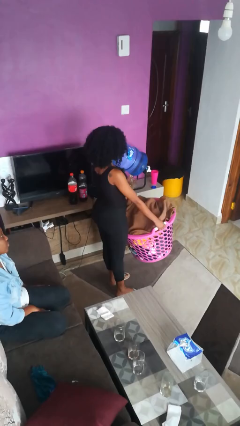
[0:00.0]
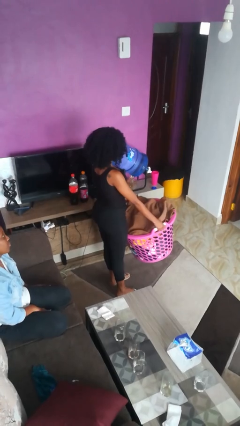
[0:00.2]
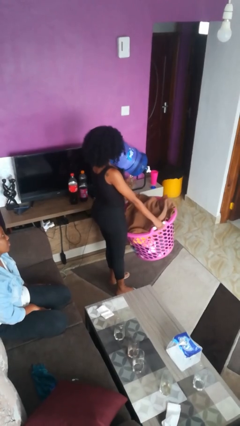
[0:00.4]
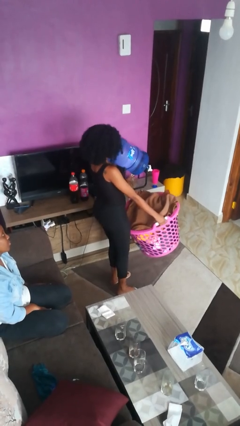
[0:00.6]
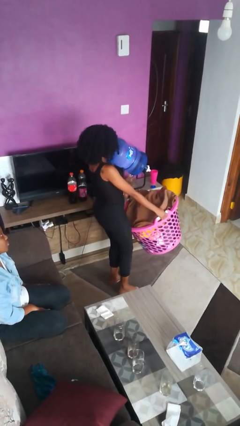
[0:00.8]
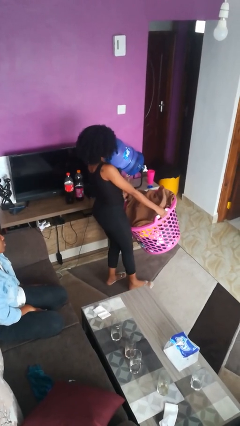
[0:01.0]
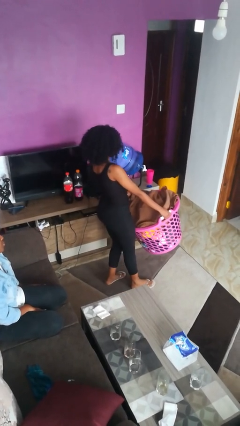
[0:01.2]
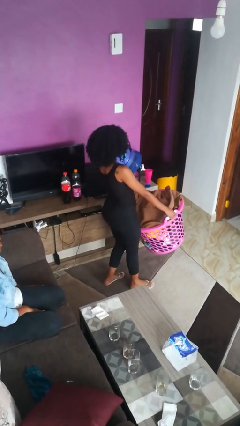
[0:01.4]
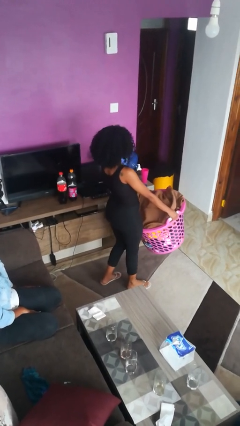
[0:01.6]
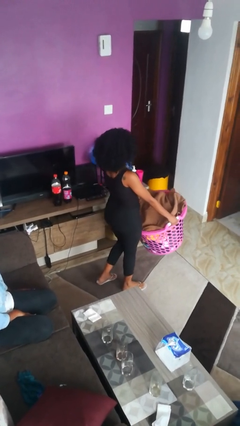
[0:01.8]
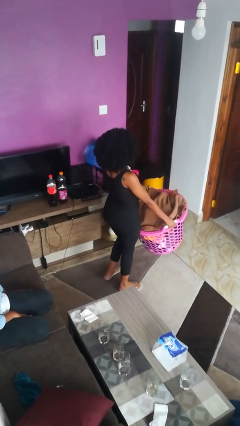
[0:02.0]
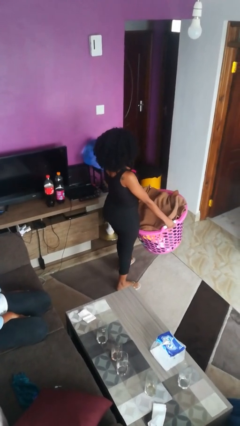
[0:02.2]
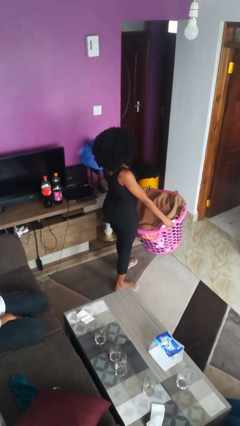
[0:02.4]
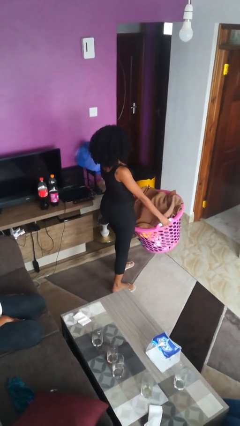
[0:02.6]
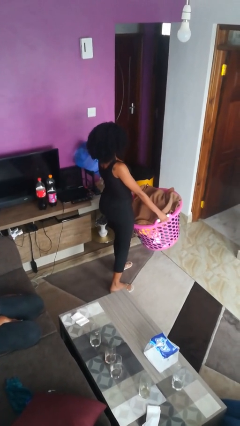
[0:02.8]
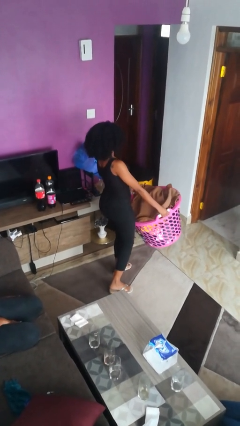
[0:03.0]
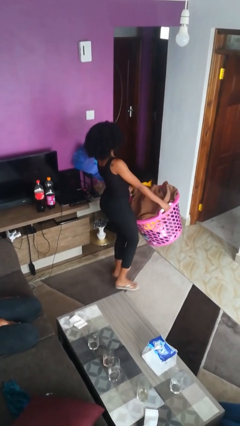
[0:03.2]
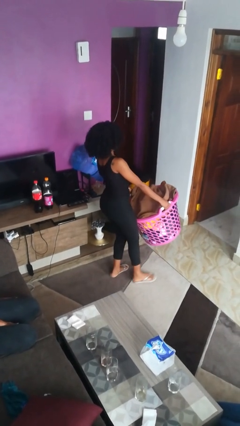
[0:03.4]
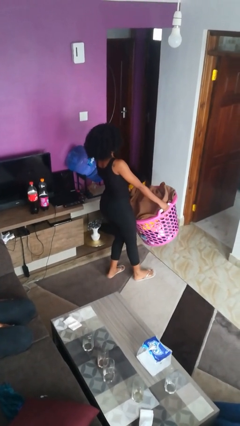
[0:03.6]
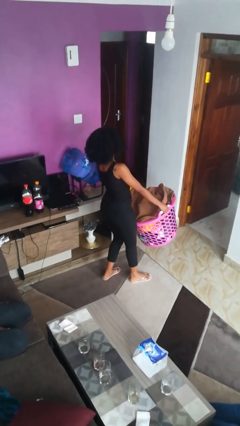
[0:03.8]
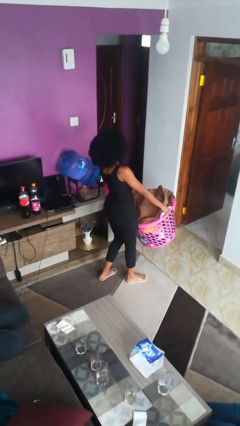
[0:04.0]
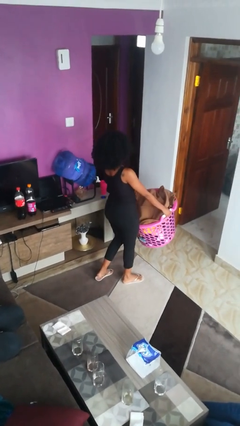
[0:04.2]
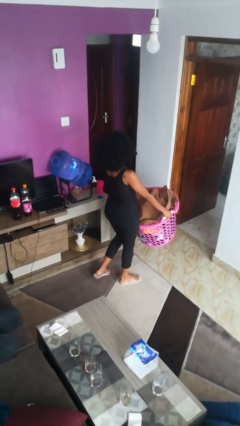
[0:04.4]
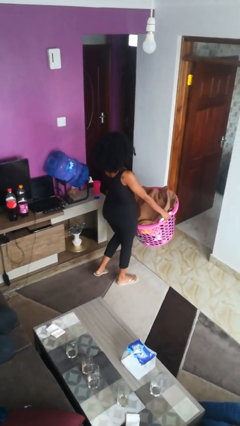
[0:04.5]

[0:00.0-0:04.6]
person carries laundry basket

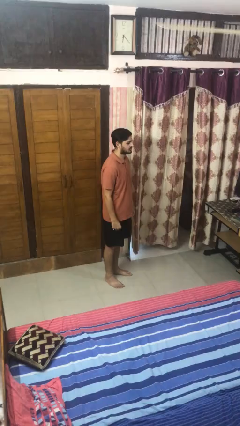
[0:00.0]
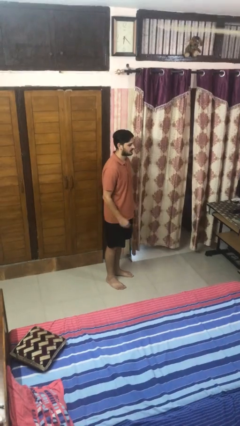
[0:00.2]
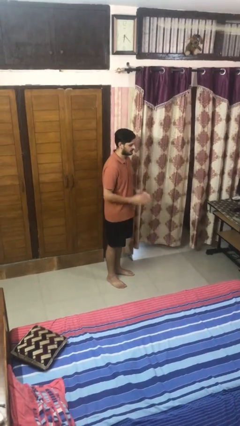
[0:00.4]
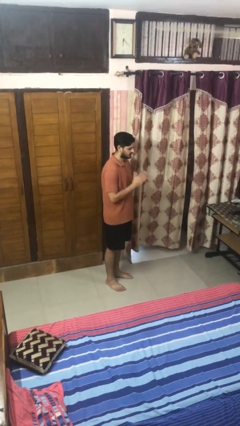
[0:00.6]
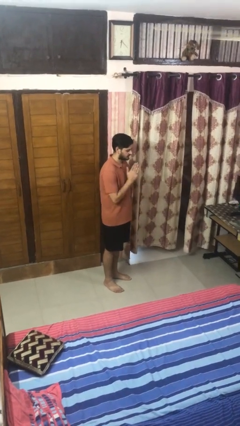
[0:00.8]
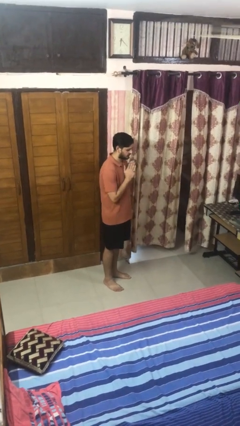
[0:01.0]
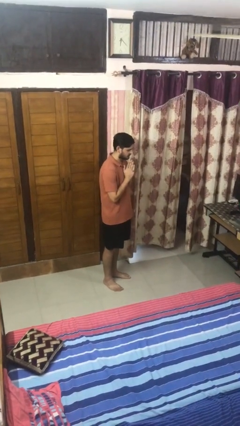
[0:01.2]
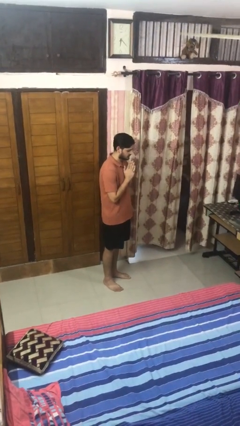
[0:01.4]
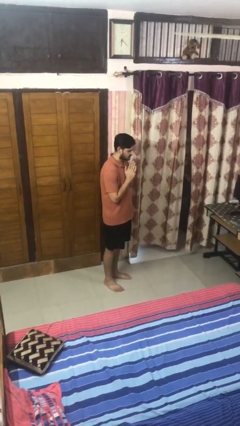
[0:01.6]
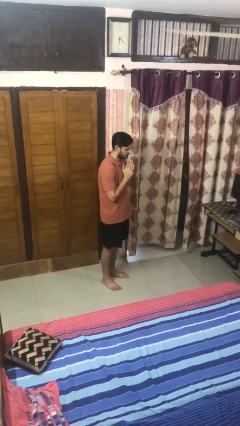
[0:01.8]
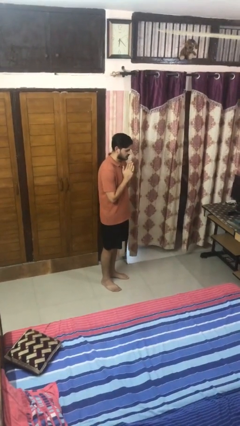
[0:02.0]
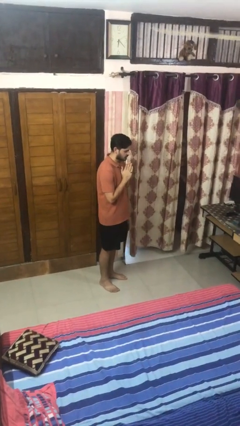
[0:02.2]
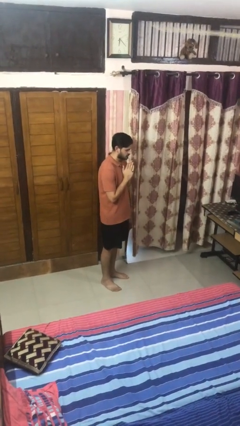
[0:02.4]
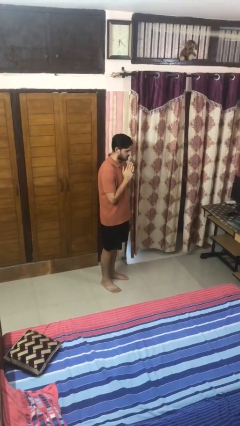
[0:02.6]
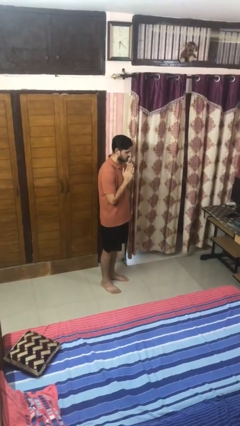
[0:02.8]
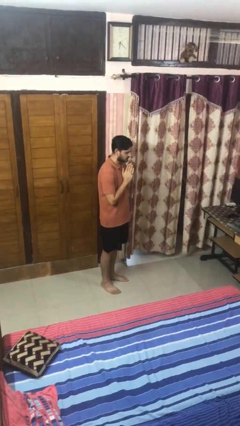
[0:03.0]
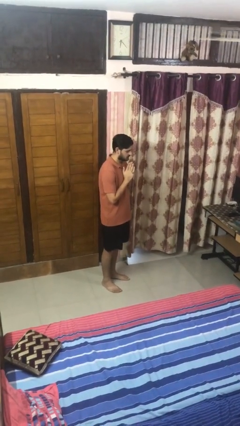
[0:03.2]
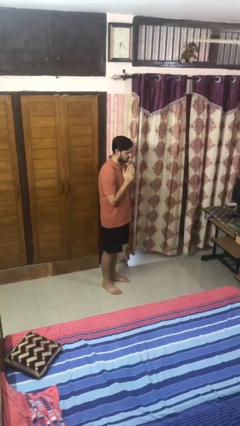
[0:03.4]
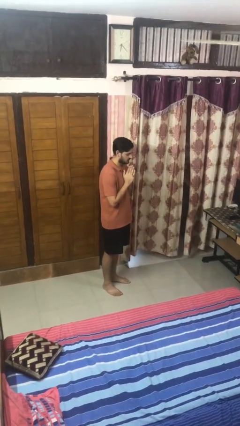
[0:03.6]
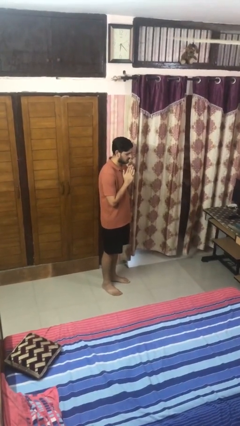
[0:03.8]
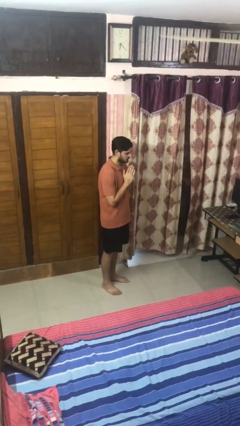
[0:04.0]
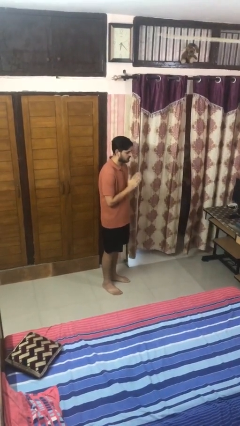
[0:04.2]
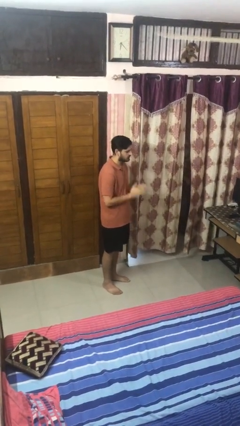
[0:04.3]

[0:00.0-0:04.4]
person prays

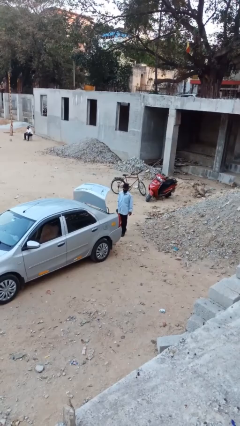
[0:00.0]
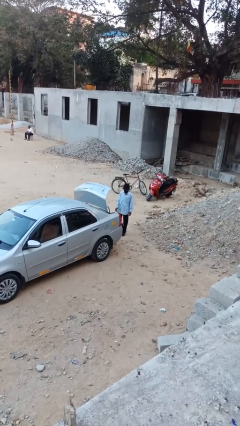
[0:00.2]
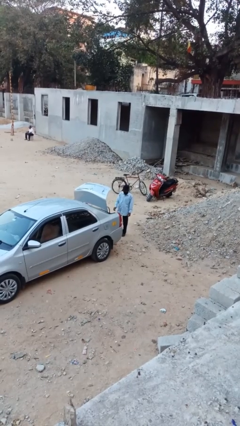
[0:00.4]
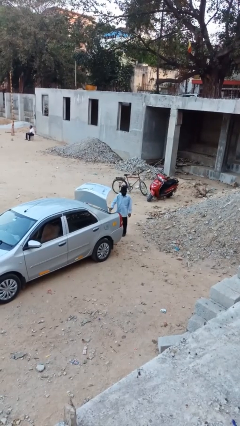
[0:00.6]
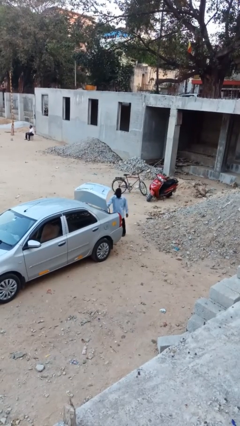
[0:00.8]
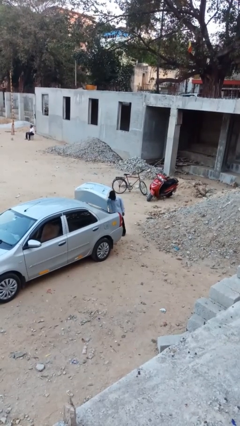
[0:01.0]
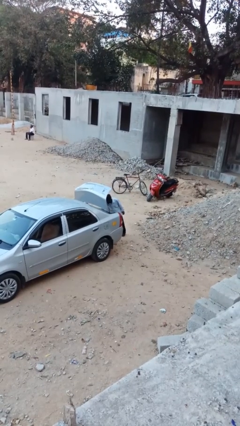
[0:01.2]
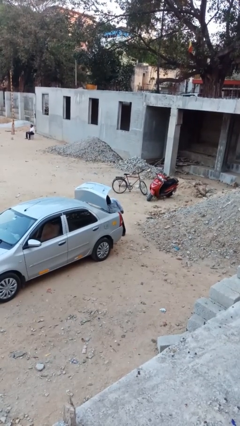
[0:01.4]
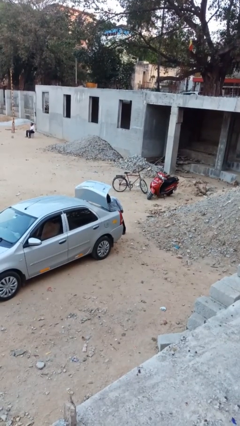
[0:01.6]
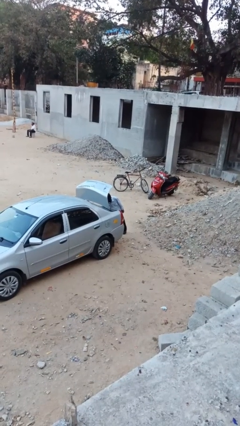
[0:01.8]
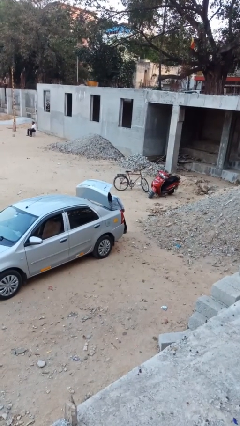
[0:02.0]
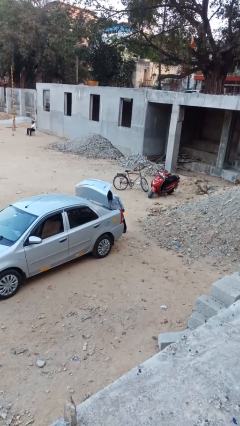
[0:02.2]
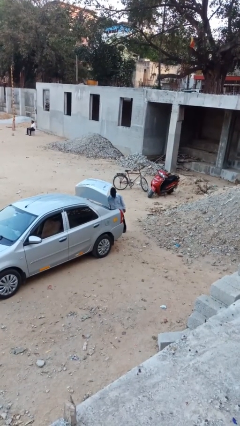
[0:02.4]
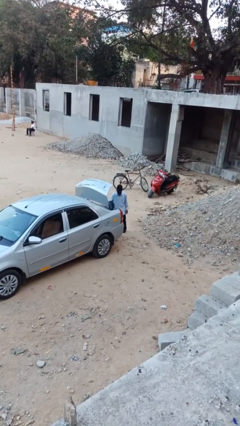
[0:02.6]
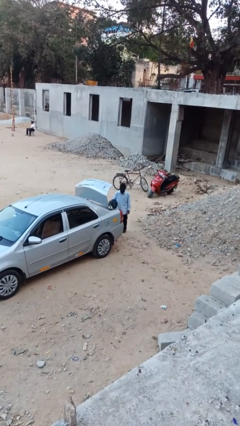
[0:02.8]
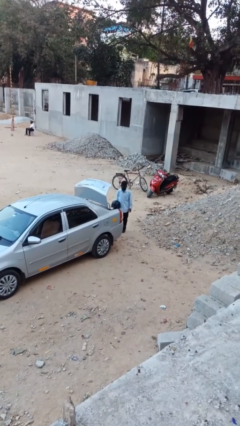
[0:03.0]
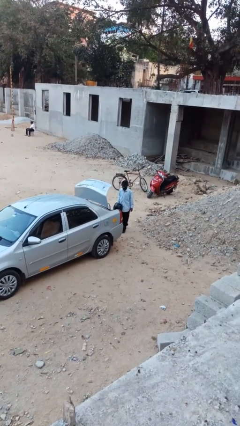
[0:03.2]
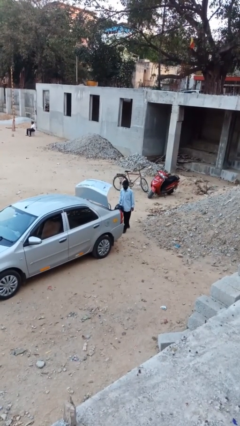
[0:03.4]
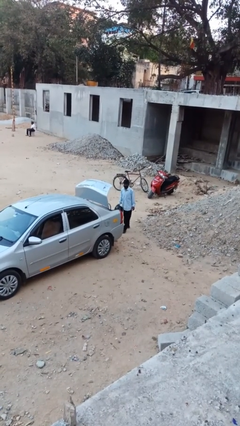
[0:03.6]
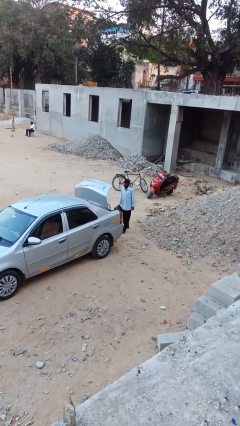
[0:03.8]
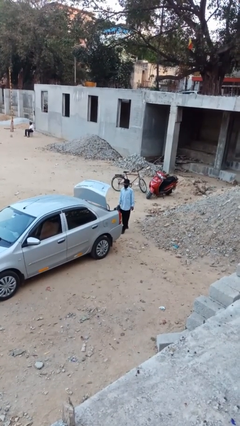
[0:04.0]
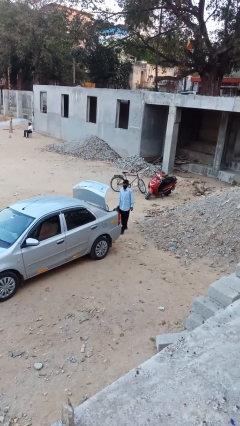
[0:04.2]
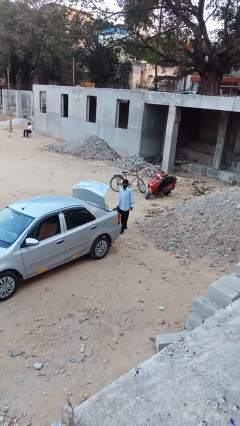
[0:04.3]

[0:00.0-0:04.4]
person unloads car

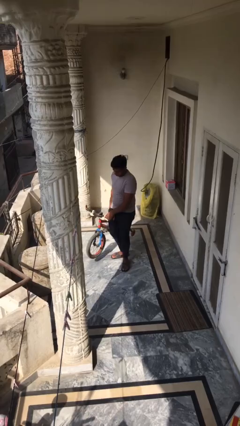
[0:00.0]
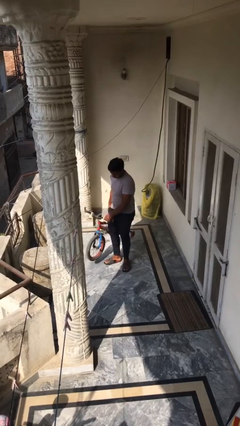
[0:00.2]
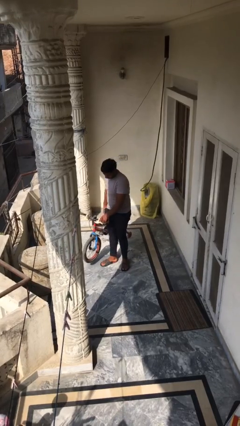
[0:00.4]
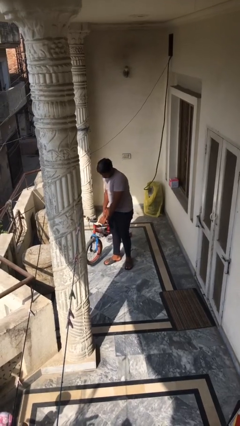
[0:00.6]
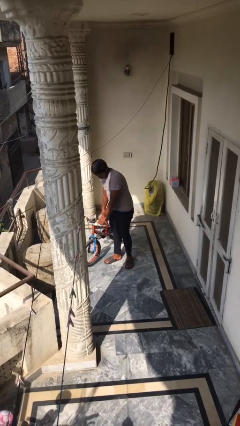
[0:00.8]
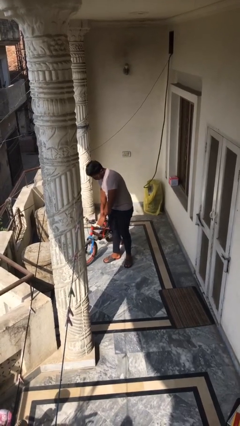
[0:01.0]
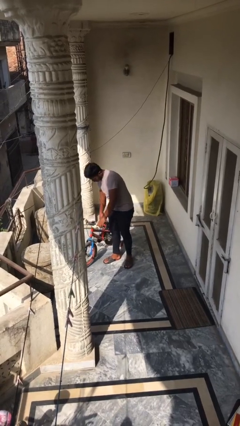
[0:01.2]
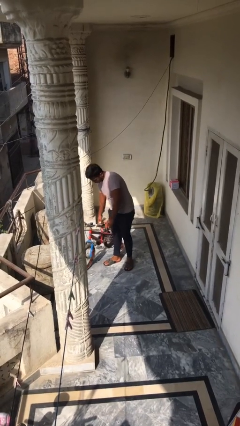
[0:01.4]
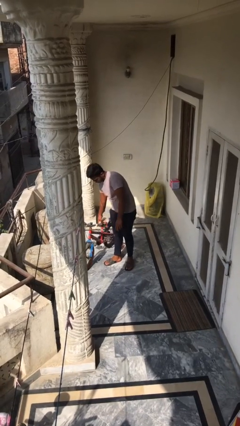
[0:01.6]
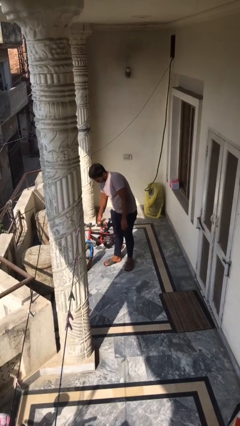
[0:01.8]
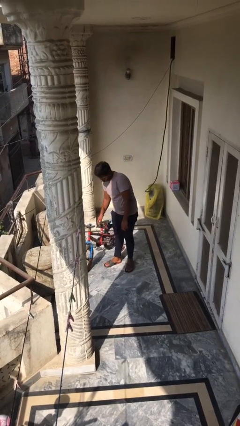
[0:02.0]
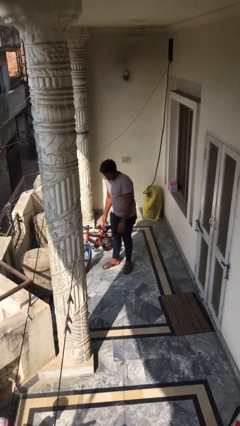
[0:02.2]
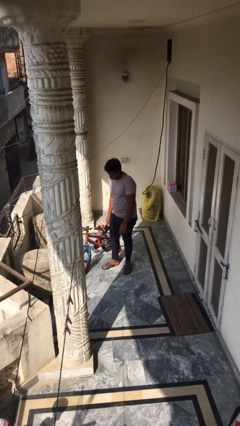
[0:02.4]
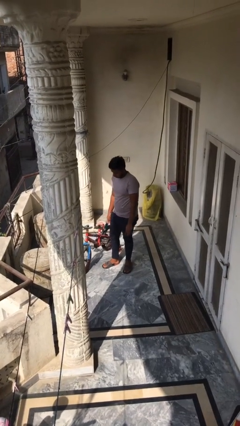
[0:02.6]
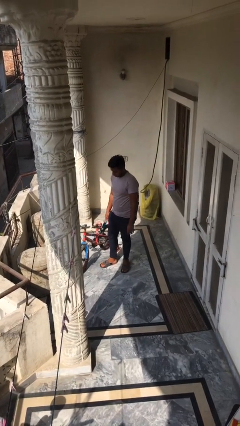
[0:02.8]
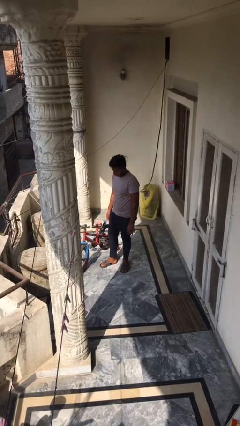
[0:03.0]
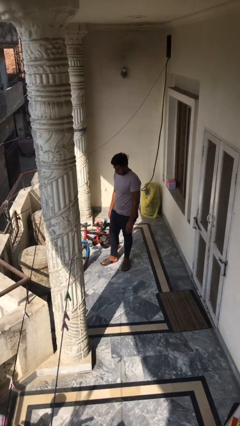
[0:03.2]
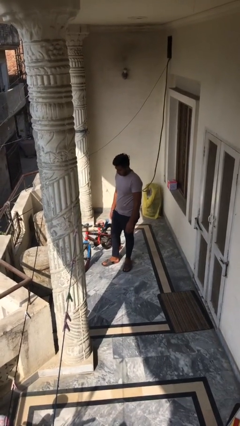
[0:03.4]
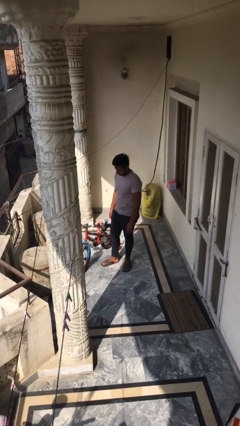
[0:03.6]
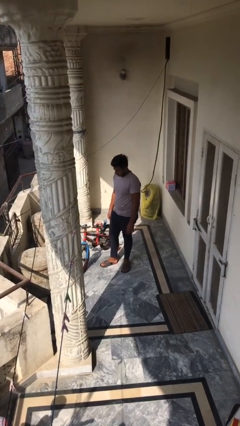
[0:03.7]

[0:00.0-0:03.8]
person puts down object on floor

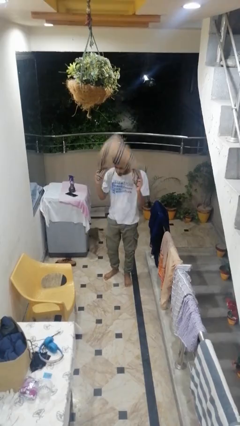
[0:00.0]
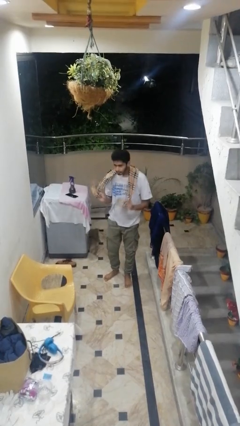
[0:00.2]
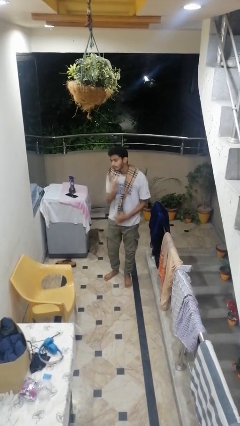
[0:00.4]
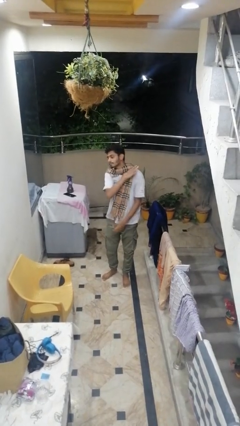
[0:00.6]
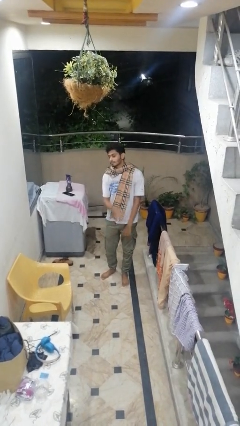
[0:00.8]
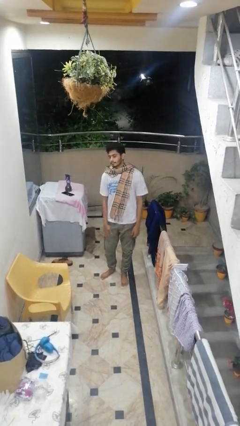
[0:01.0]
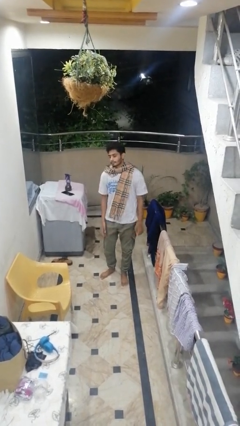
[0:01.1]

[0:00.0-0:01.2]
person puts on scarf
